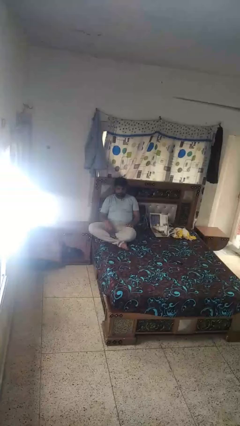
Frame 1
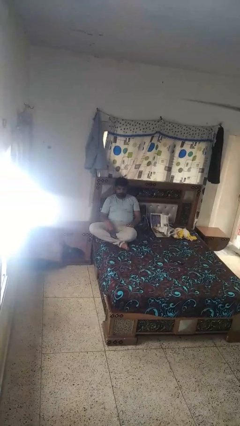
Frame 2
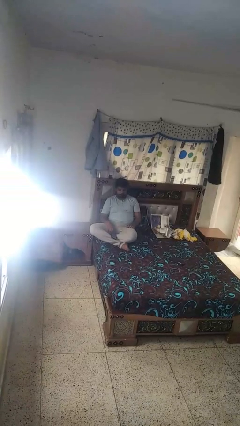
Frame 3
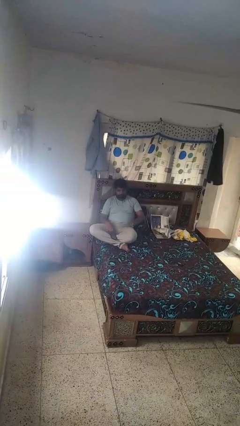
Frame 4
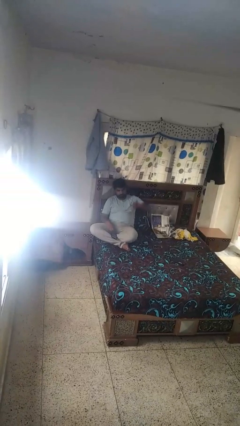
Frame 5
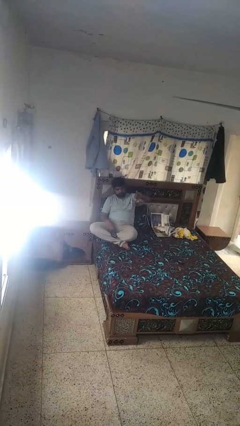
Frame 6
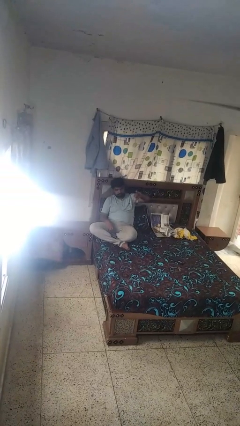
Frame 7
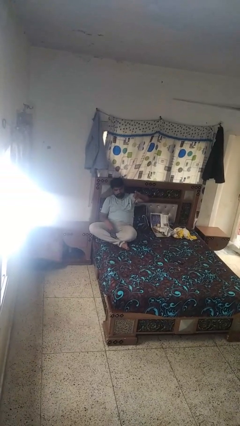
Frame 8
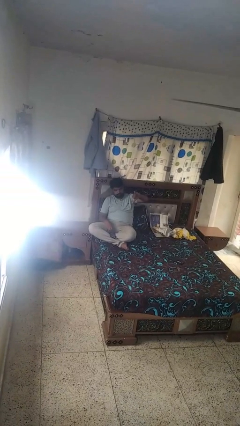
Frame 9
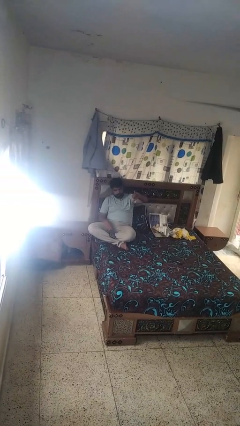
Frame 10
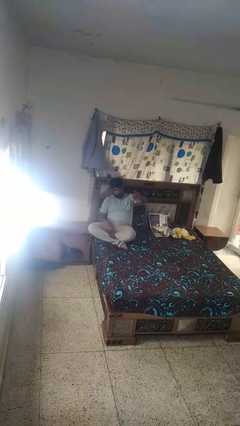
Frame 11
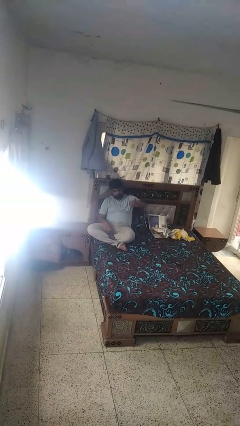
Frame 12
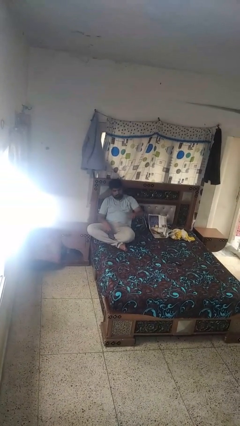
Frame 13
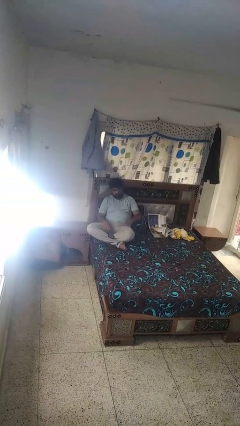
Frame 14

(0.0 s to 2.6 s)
person gestures thumbs down

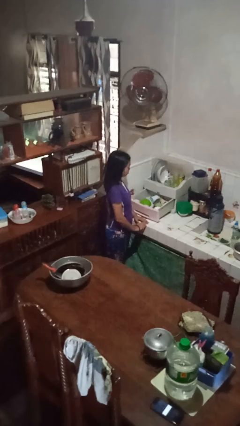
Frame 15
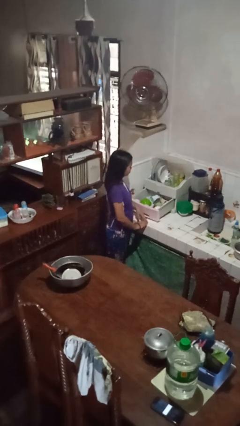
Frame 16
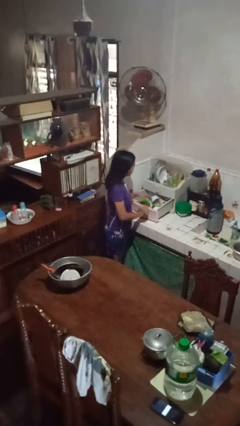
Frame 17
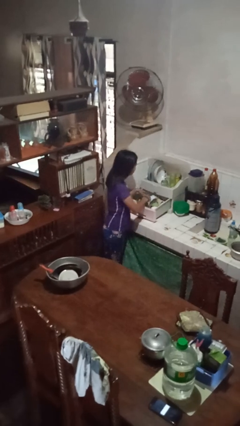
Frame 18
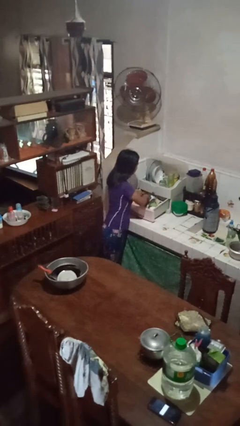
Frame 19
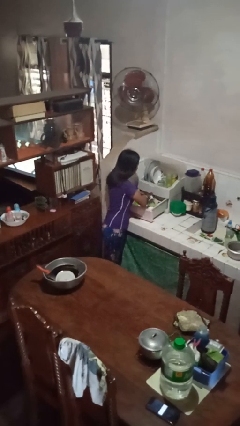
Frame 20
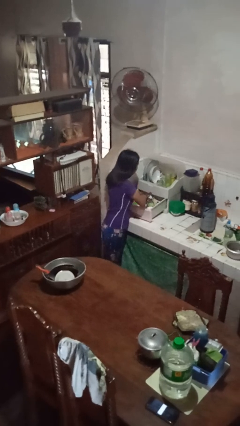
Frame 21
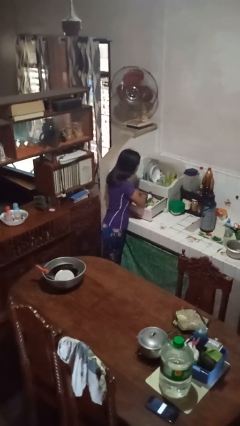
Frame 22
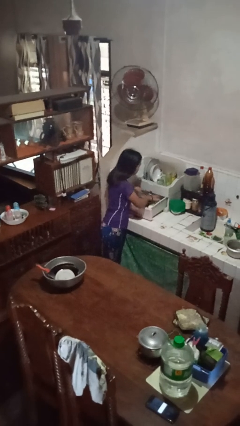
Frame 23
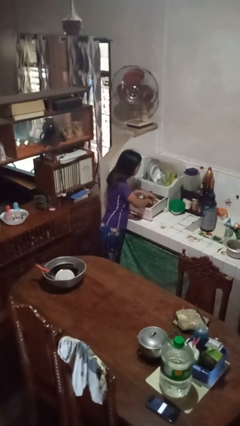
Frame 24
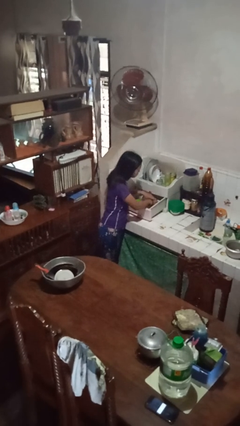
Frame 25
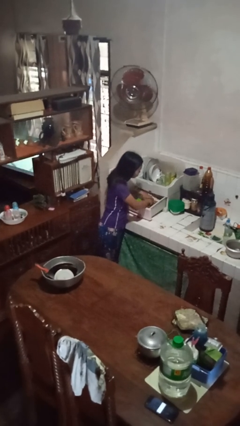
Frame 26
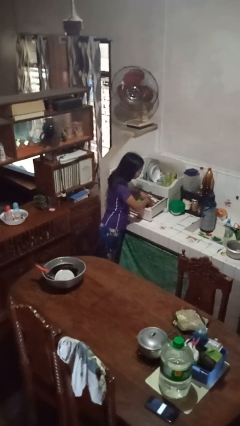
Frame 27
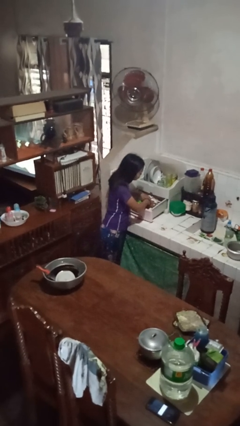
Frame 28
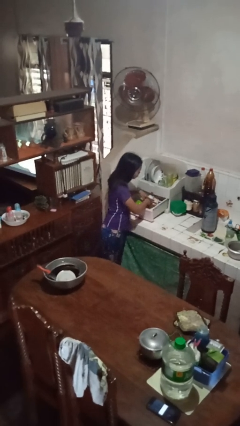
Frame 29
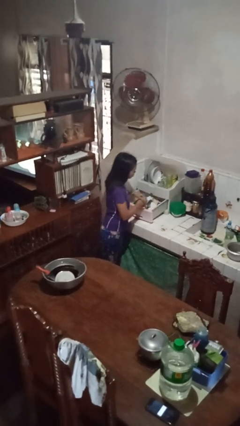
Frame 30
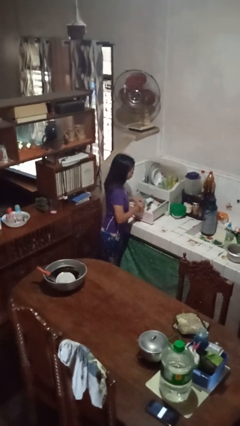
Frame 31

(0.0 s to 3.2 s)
person searches in kitchen drawer

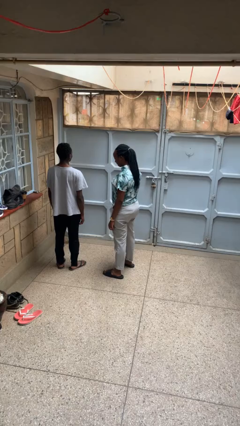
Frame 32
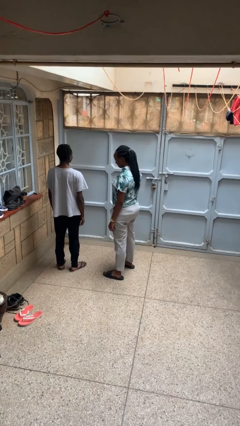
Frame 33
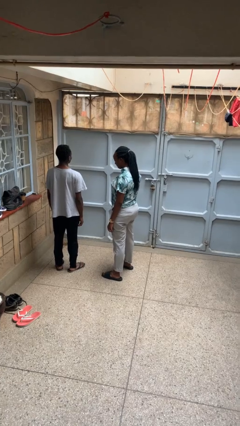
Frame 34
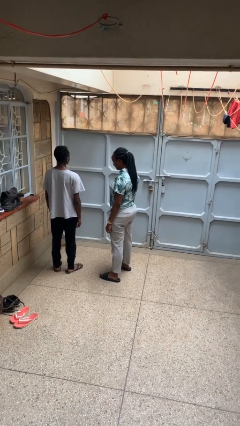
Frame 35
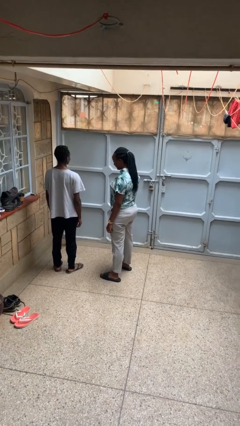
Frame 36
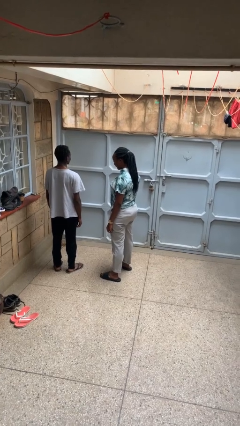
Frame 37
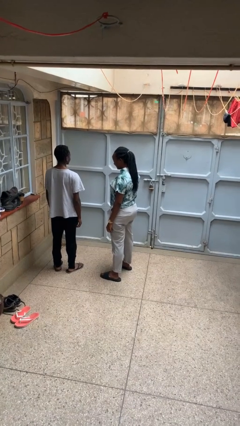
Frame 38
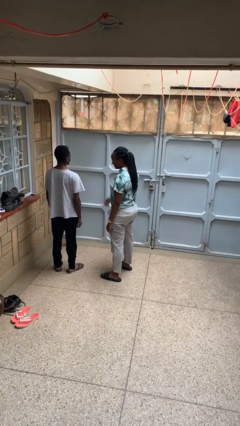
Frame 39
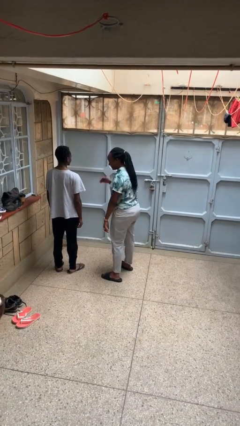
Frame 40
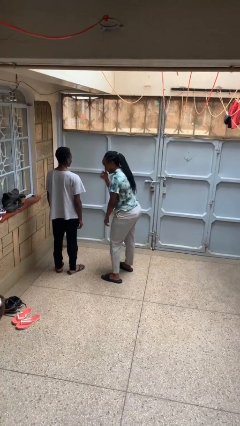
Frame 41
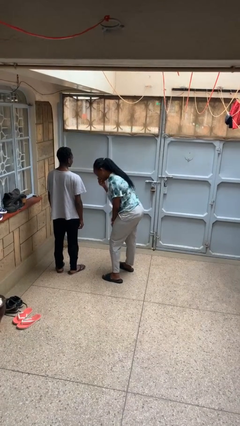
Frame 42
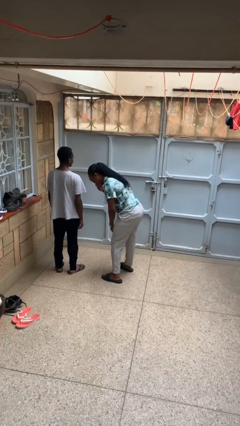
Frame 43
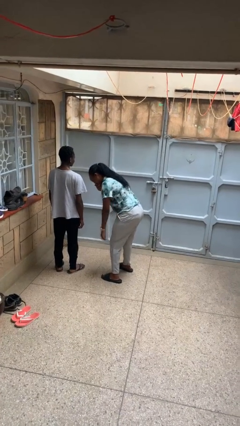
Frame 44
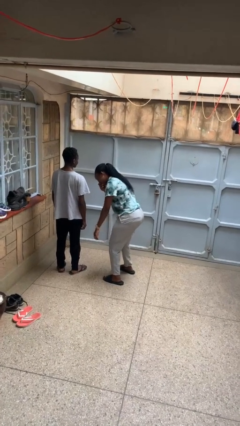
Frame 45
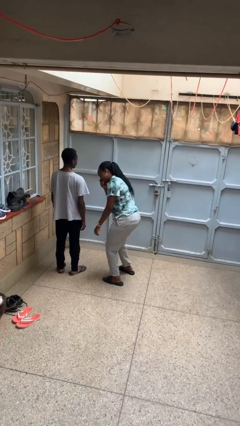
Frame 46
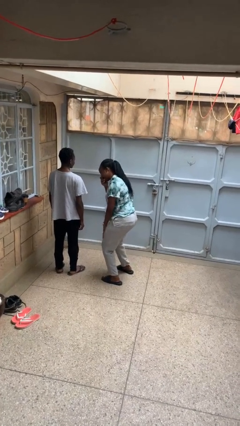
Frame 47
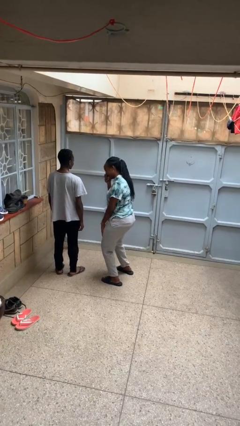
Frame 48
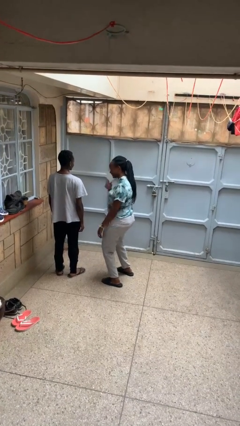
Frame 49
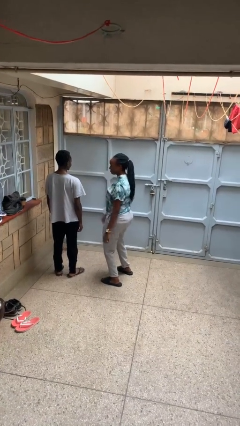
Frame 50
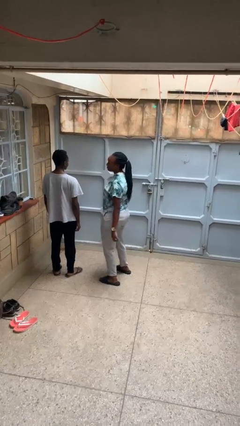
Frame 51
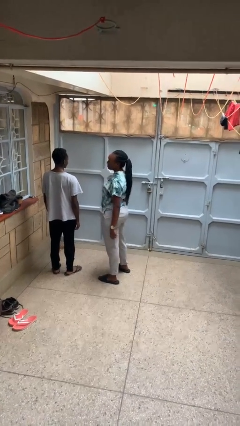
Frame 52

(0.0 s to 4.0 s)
person laughs with person

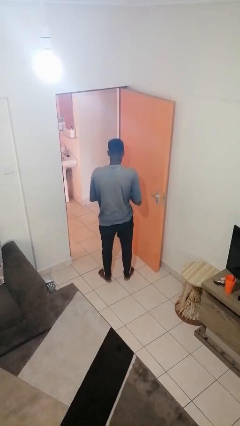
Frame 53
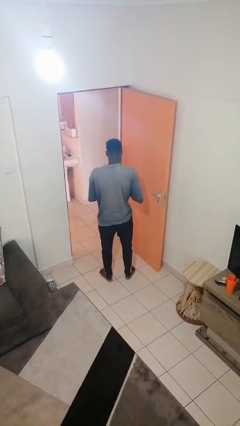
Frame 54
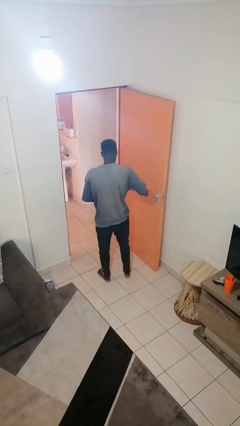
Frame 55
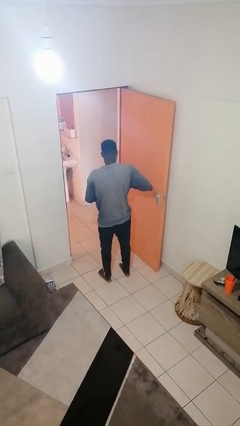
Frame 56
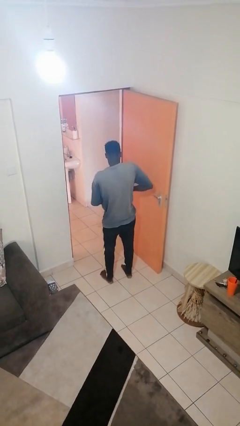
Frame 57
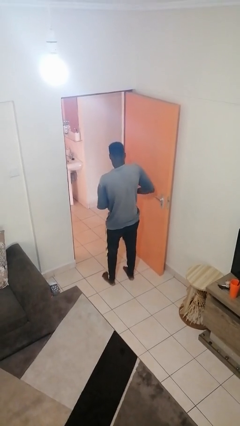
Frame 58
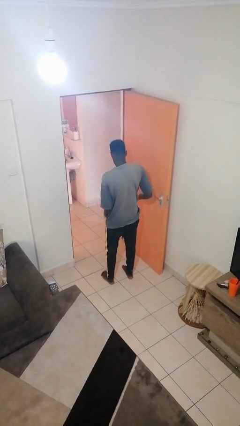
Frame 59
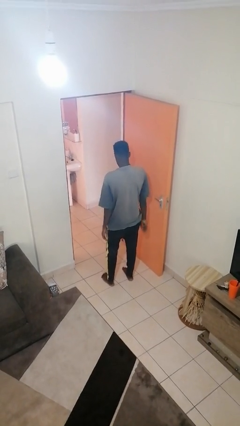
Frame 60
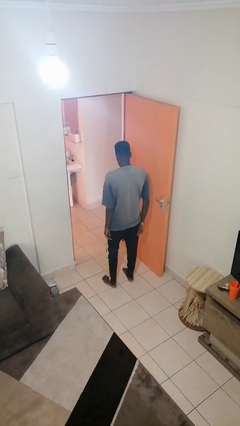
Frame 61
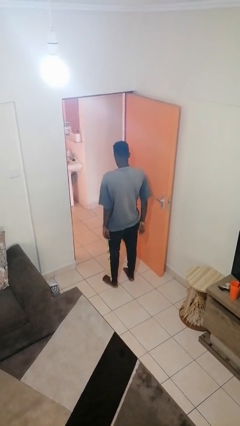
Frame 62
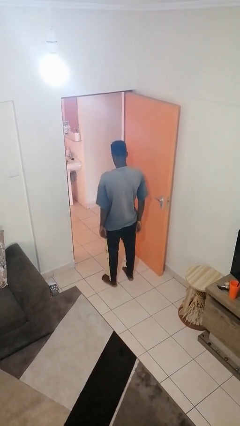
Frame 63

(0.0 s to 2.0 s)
person puts phone into pocket

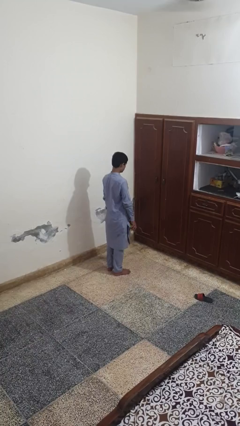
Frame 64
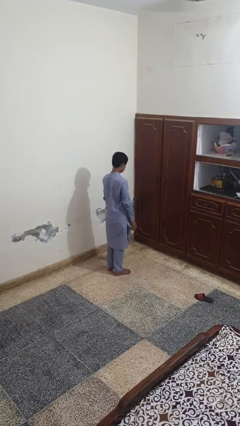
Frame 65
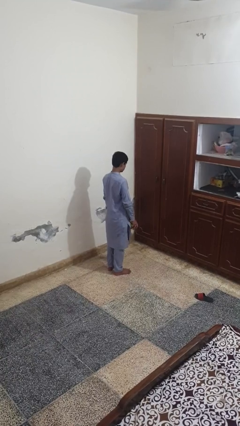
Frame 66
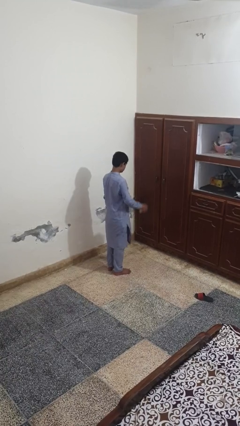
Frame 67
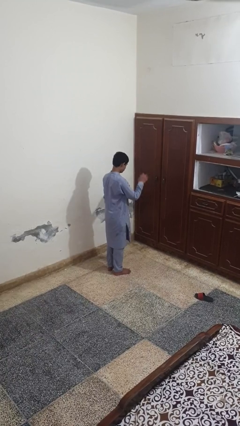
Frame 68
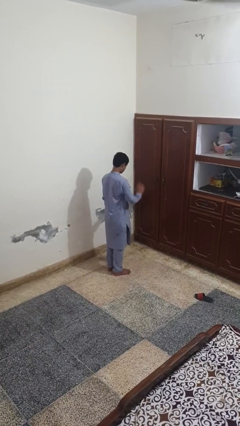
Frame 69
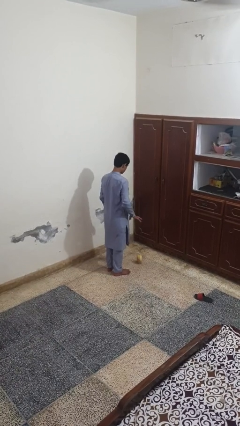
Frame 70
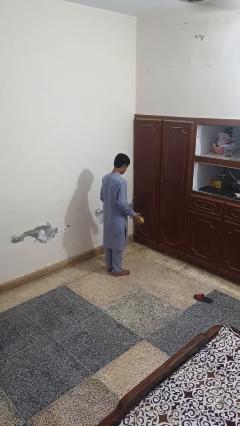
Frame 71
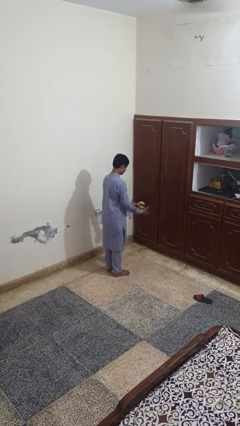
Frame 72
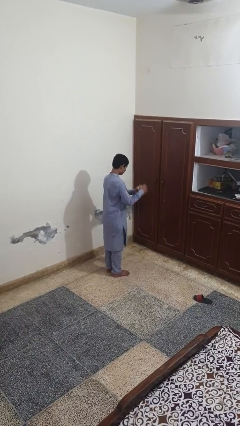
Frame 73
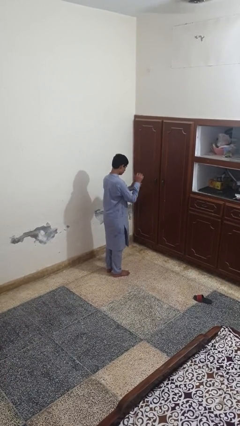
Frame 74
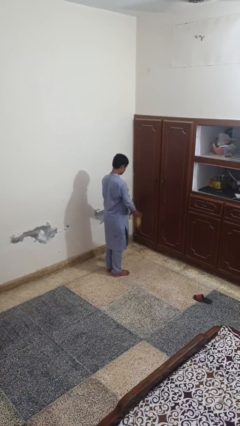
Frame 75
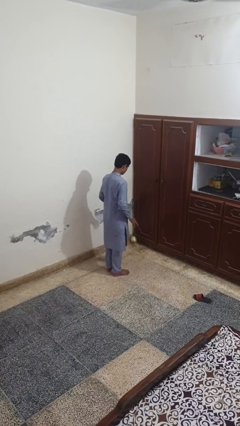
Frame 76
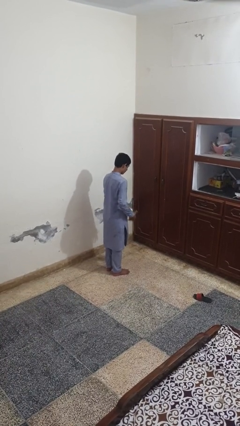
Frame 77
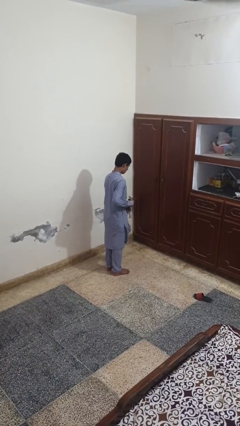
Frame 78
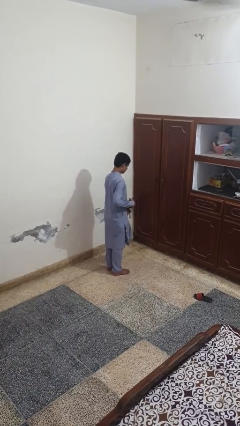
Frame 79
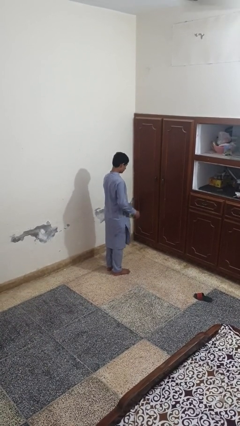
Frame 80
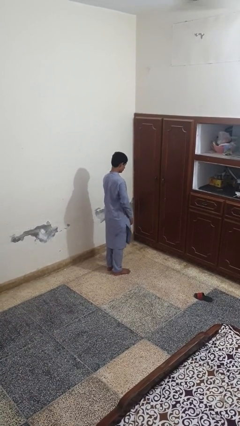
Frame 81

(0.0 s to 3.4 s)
person bounces ball on floor

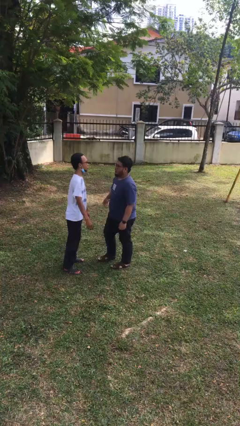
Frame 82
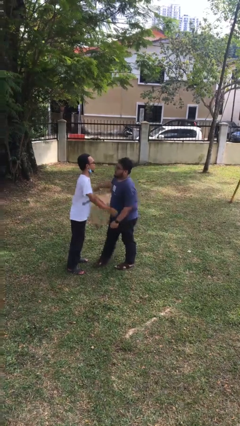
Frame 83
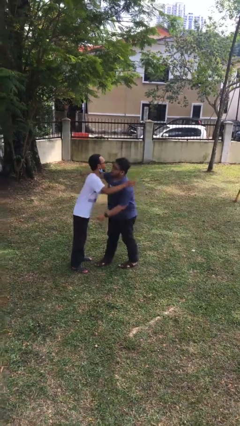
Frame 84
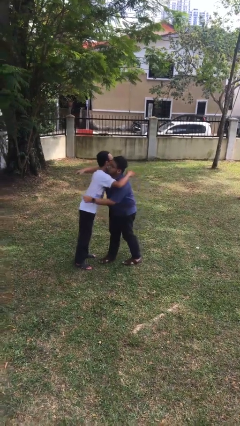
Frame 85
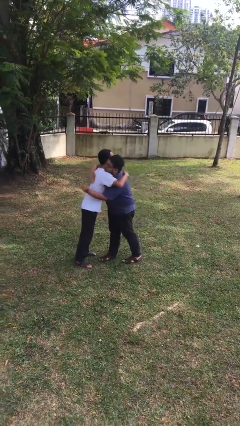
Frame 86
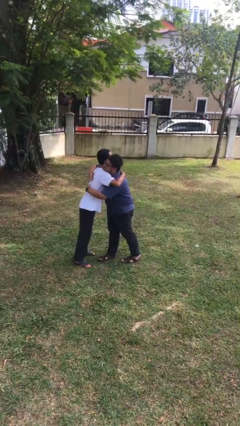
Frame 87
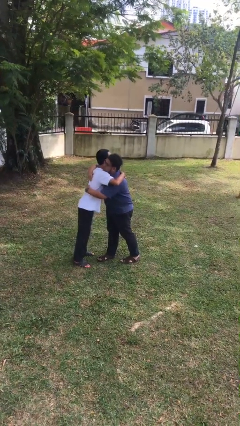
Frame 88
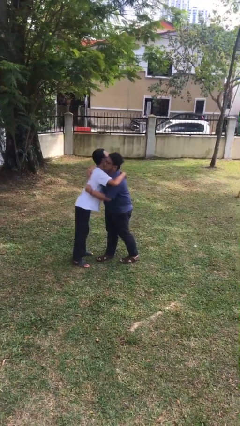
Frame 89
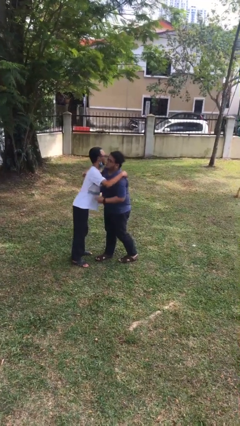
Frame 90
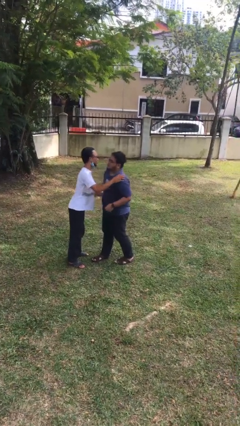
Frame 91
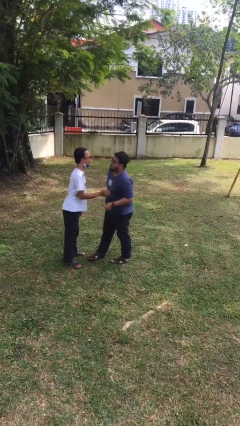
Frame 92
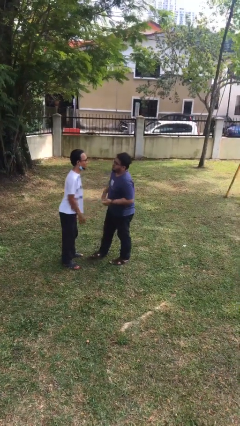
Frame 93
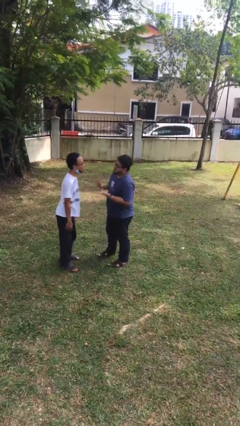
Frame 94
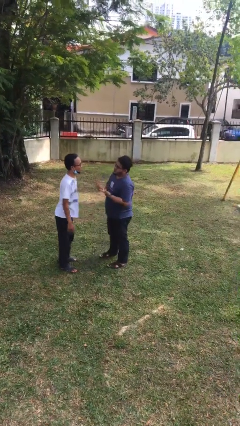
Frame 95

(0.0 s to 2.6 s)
person embraces person
